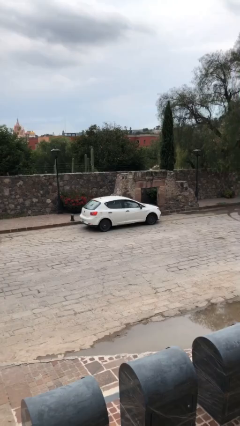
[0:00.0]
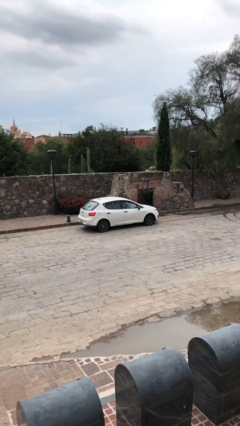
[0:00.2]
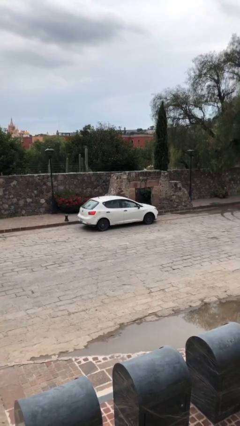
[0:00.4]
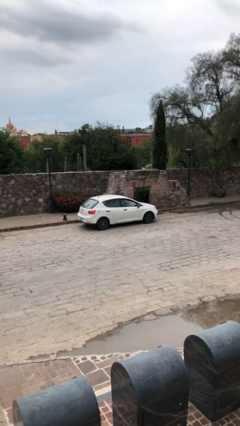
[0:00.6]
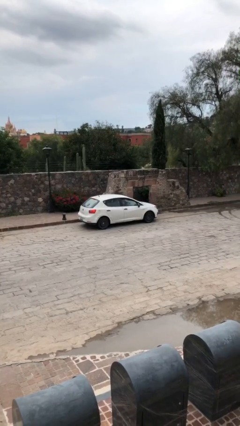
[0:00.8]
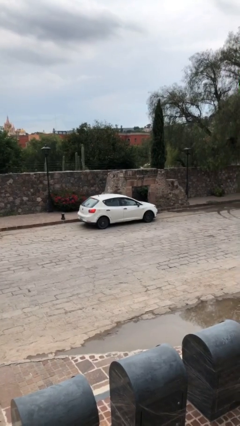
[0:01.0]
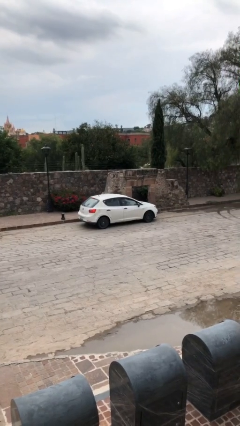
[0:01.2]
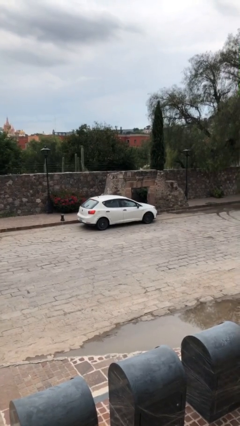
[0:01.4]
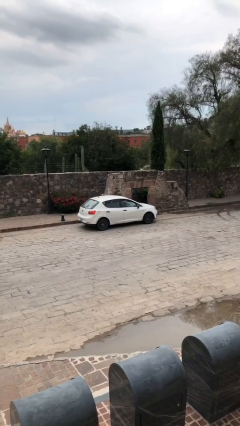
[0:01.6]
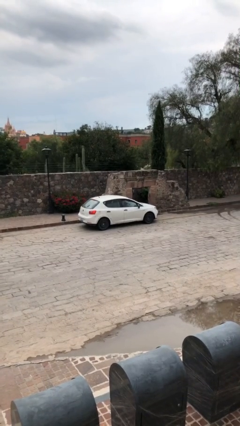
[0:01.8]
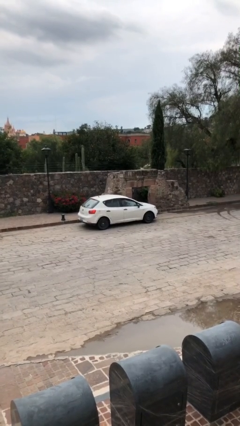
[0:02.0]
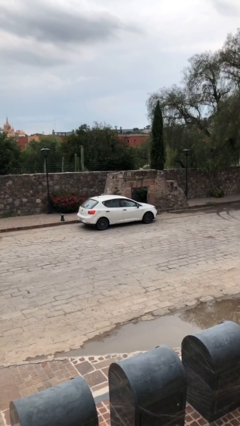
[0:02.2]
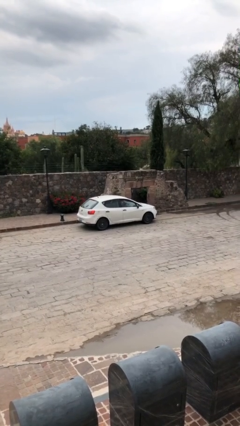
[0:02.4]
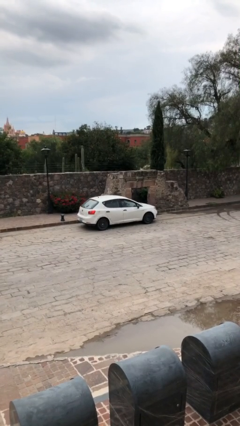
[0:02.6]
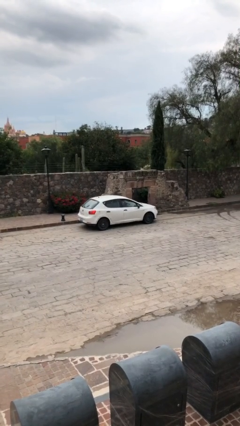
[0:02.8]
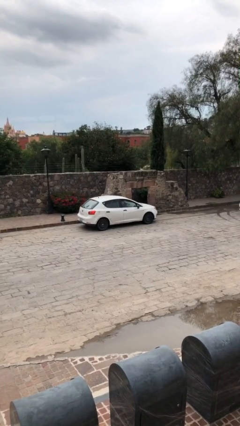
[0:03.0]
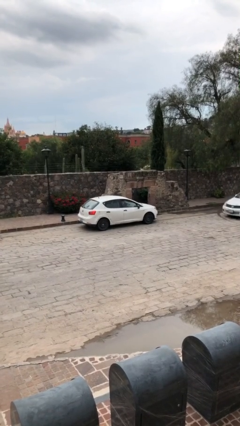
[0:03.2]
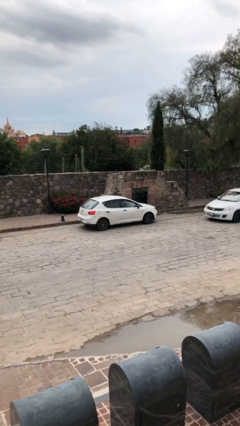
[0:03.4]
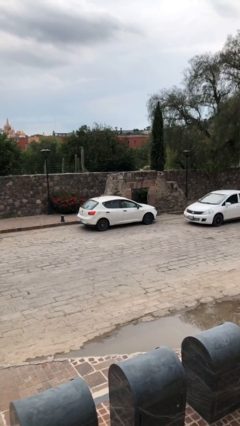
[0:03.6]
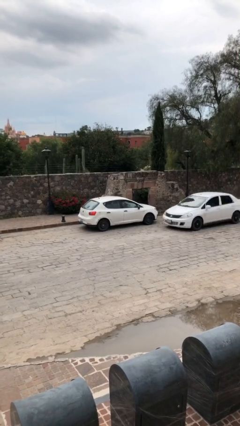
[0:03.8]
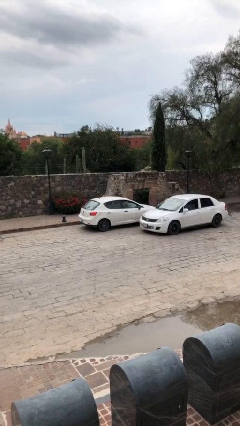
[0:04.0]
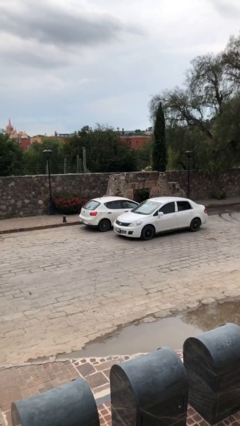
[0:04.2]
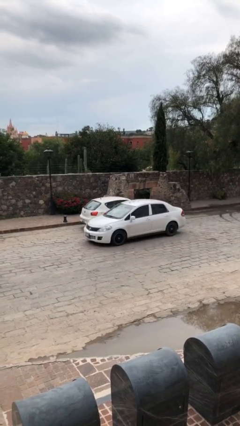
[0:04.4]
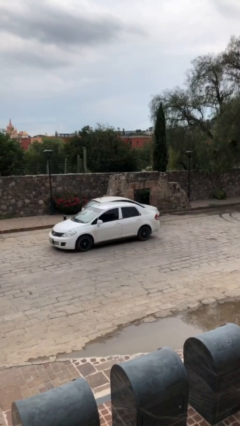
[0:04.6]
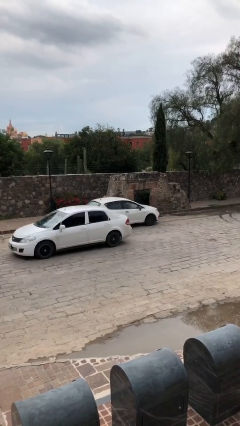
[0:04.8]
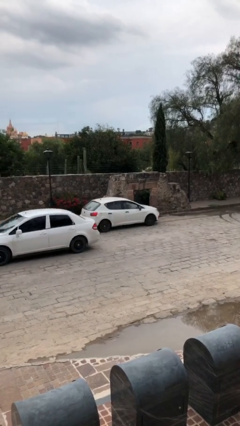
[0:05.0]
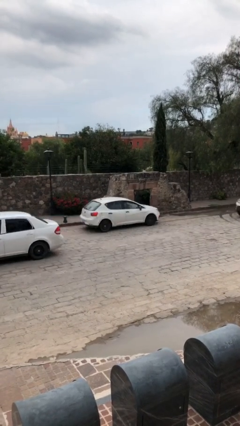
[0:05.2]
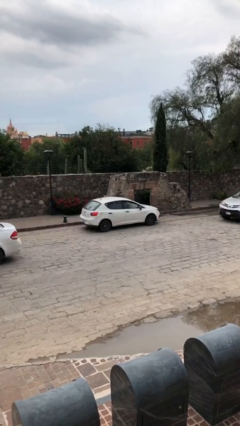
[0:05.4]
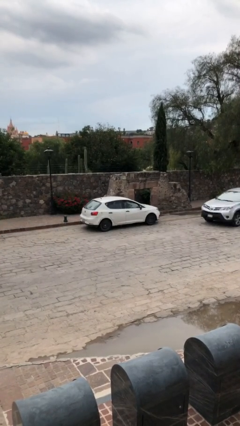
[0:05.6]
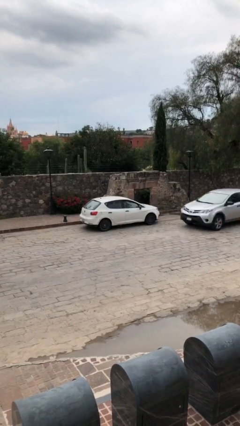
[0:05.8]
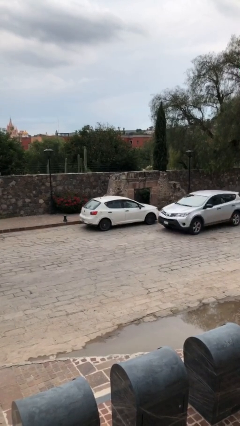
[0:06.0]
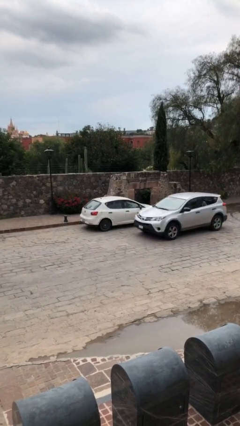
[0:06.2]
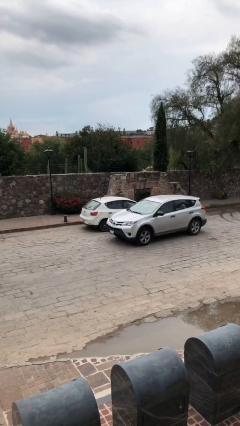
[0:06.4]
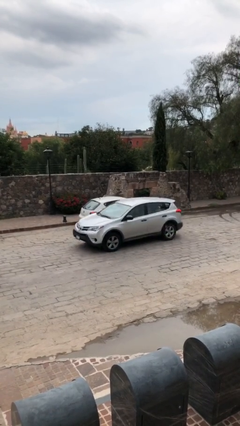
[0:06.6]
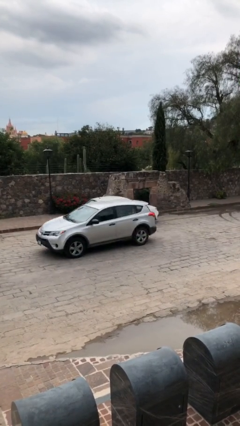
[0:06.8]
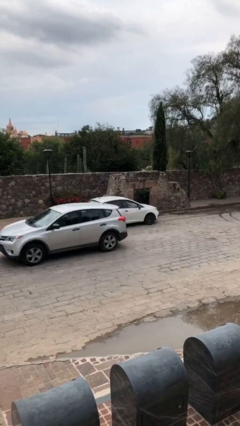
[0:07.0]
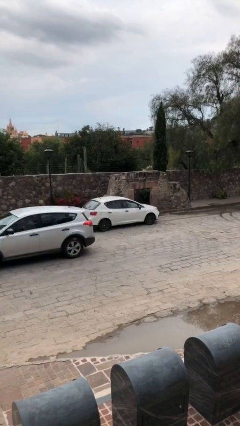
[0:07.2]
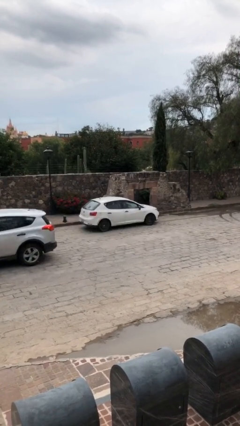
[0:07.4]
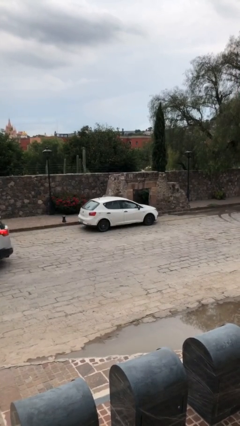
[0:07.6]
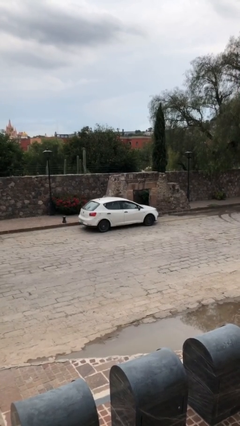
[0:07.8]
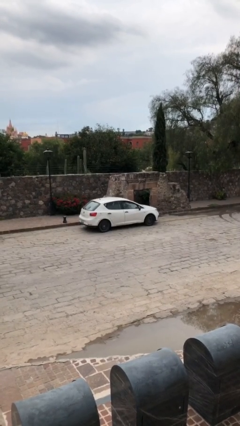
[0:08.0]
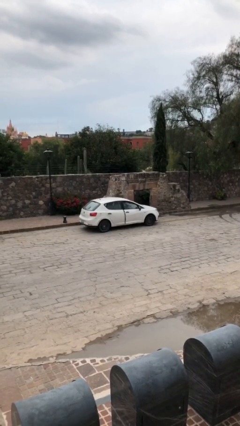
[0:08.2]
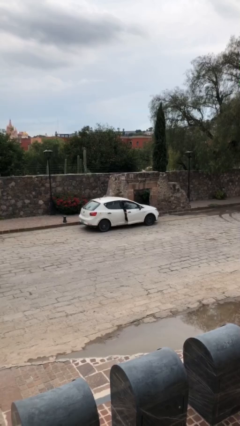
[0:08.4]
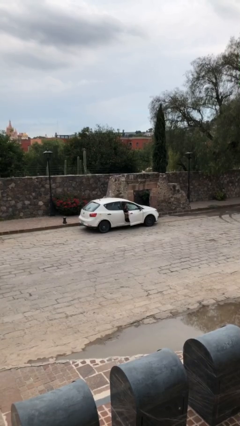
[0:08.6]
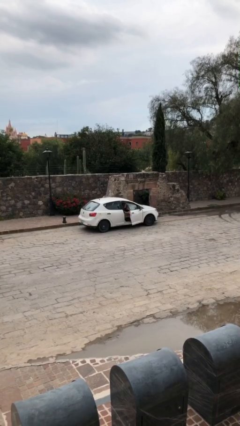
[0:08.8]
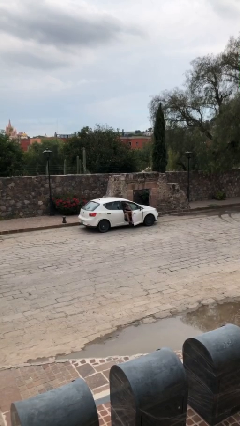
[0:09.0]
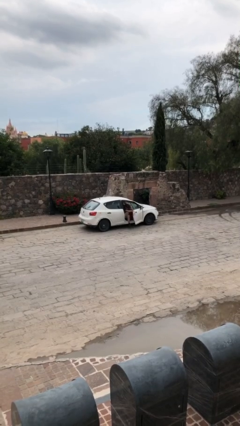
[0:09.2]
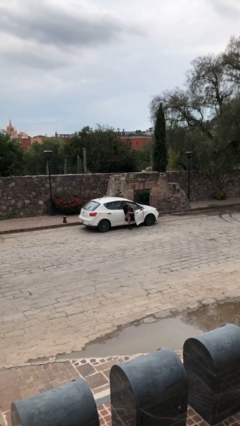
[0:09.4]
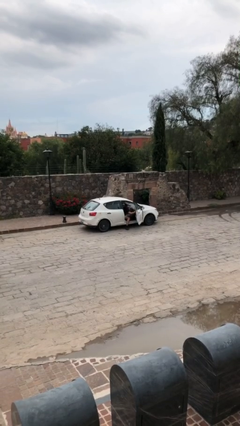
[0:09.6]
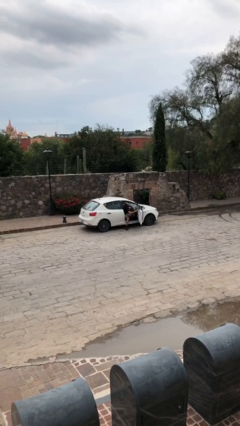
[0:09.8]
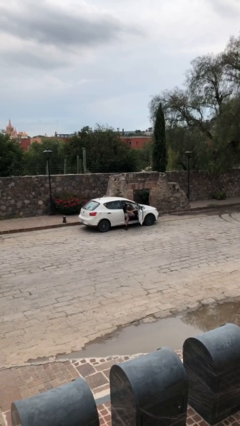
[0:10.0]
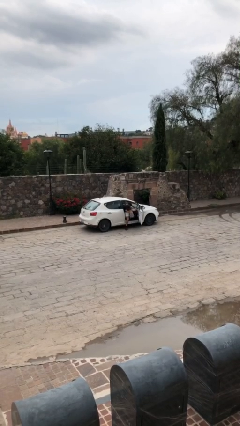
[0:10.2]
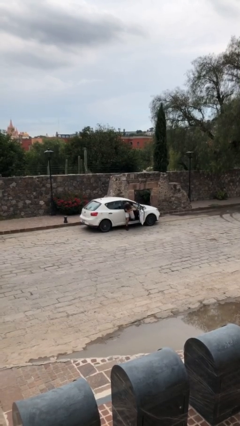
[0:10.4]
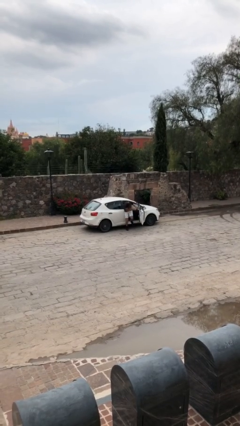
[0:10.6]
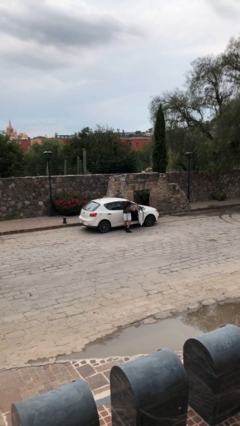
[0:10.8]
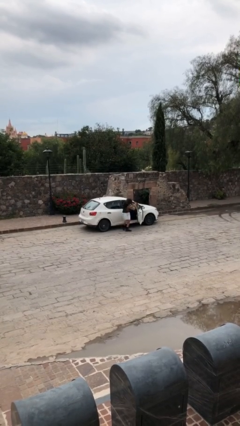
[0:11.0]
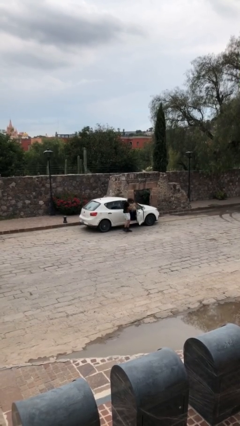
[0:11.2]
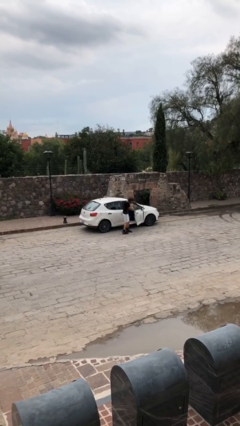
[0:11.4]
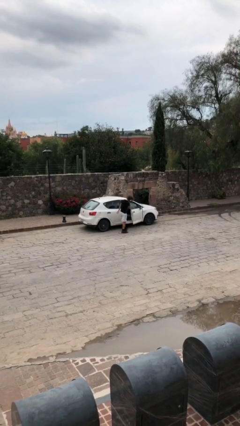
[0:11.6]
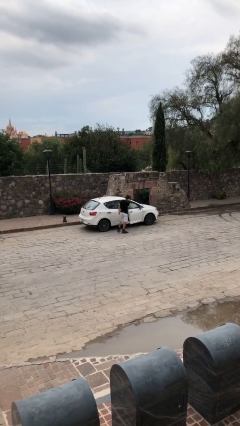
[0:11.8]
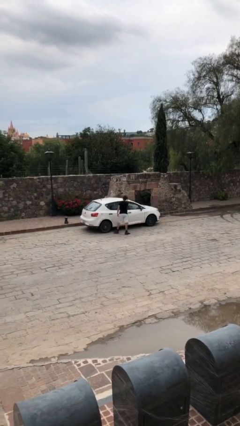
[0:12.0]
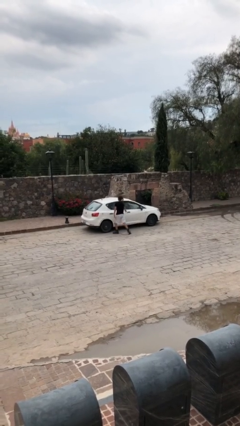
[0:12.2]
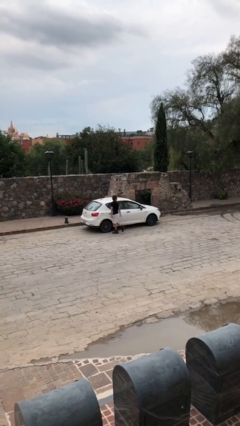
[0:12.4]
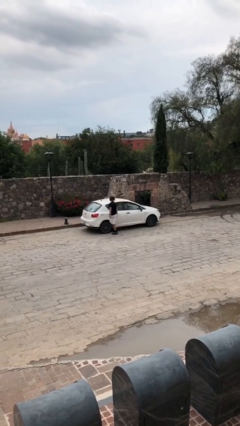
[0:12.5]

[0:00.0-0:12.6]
car drops off person

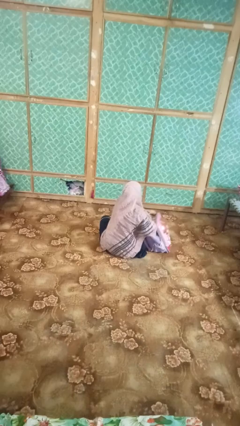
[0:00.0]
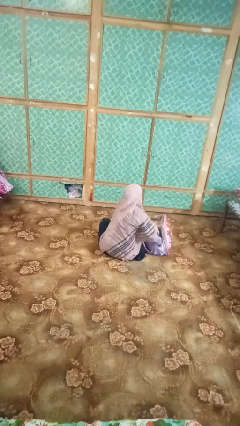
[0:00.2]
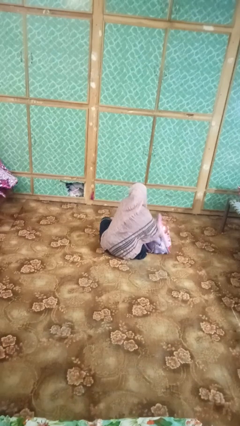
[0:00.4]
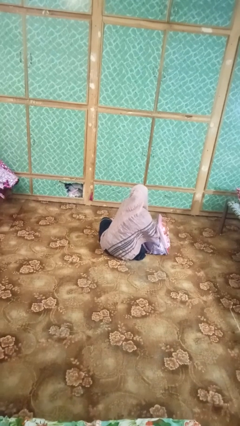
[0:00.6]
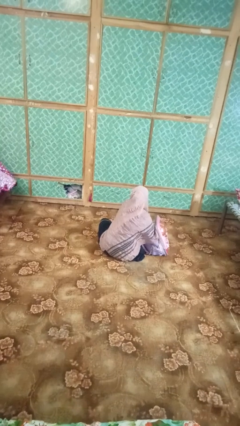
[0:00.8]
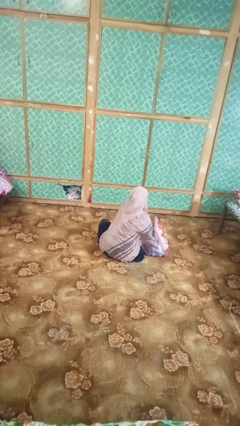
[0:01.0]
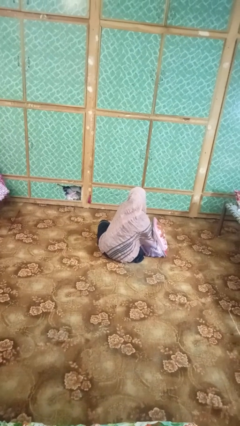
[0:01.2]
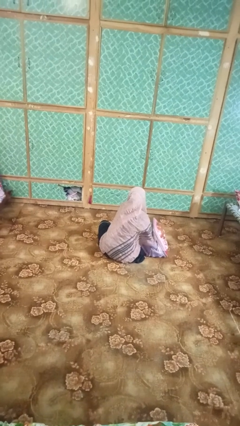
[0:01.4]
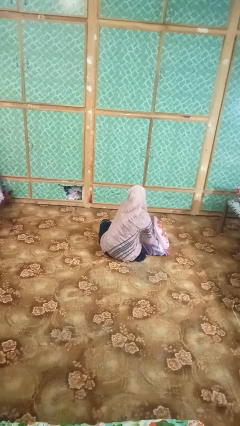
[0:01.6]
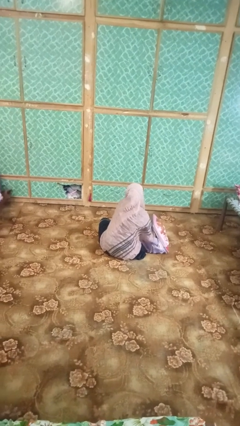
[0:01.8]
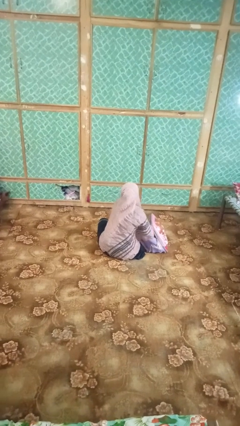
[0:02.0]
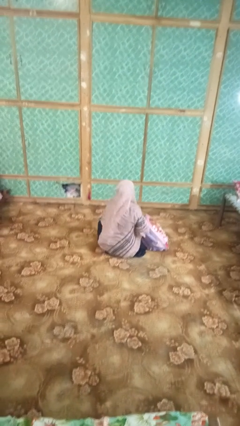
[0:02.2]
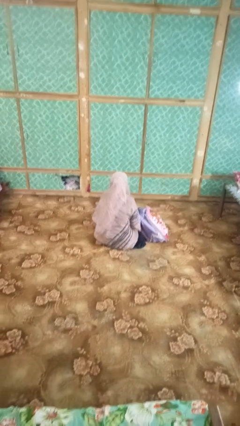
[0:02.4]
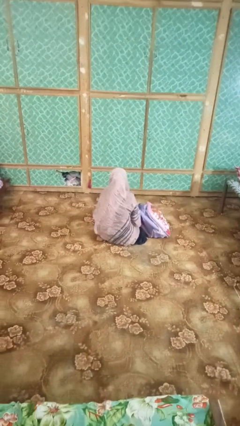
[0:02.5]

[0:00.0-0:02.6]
person searches in bag

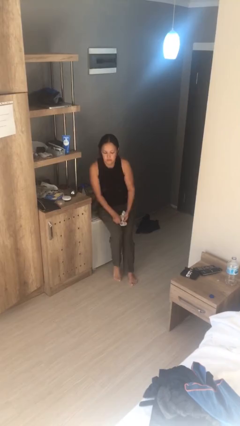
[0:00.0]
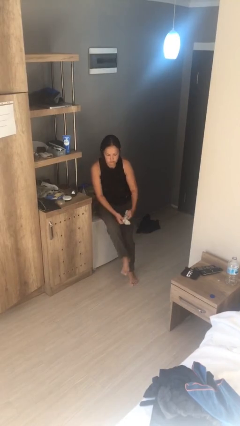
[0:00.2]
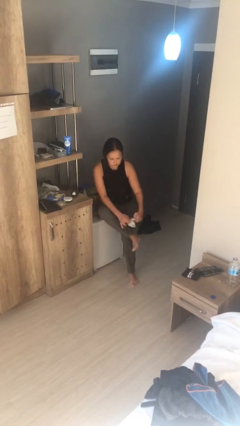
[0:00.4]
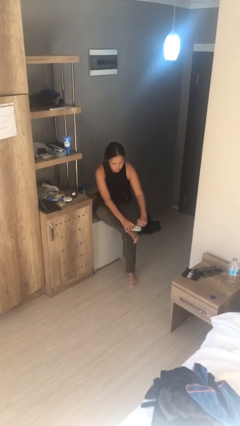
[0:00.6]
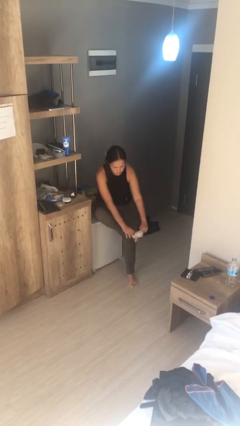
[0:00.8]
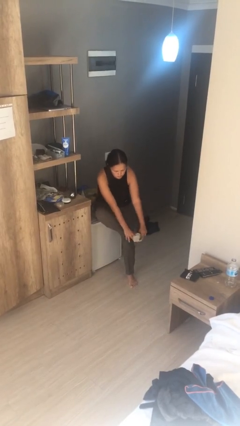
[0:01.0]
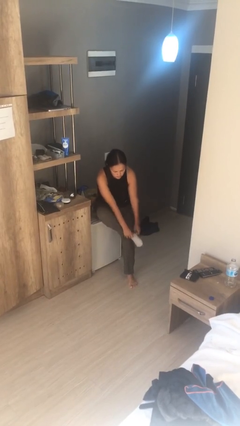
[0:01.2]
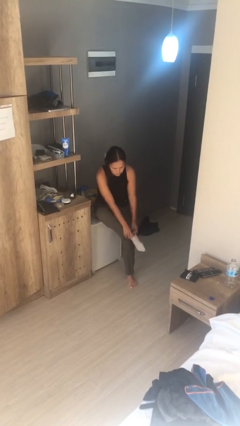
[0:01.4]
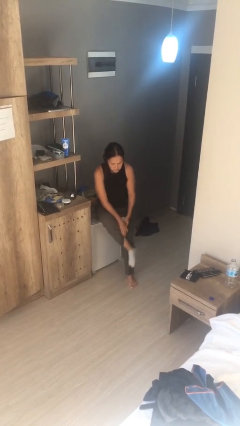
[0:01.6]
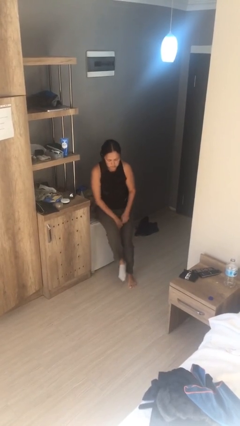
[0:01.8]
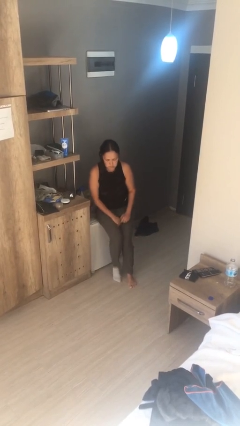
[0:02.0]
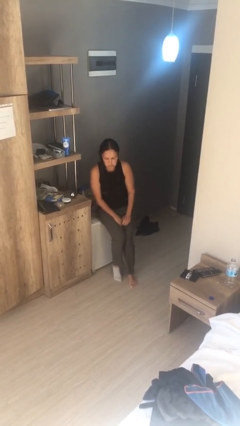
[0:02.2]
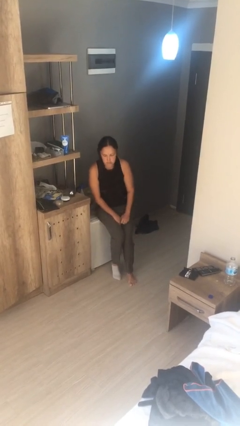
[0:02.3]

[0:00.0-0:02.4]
person puts on socks

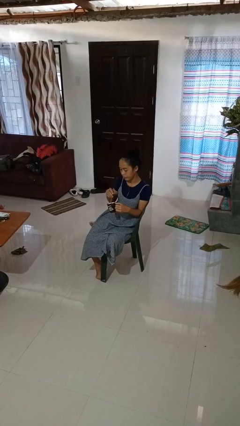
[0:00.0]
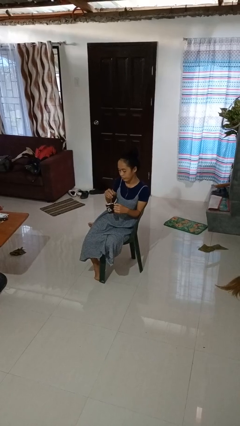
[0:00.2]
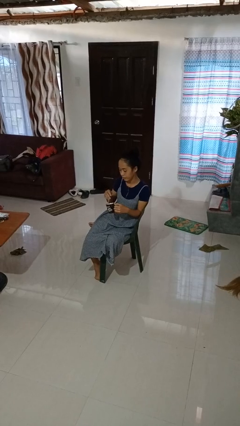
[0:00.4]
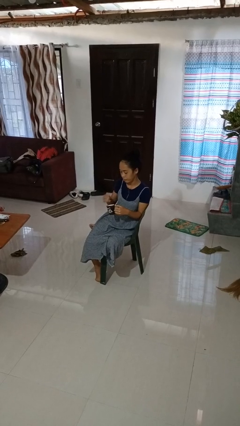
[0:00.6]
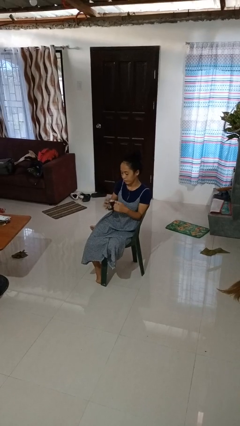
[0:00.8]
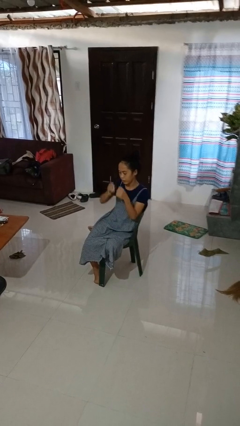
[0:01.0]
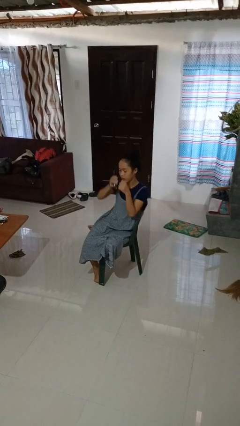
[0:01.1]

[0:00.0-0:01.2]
person stirs mug
